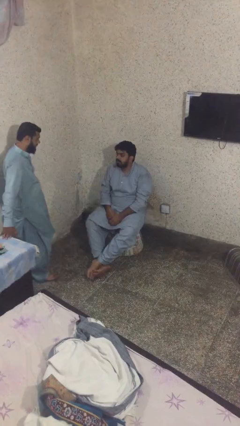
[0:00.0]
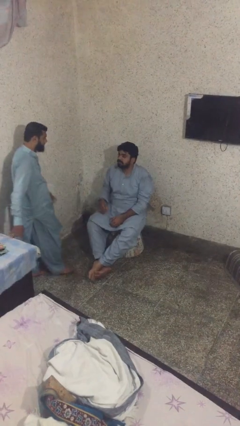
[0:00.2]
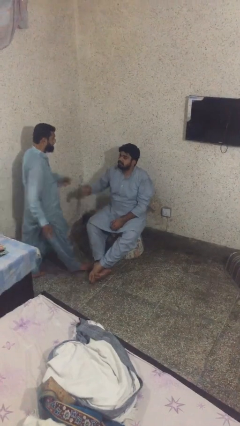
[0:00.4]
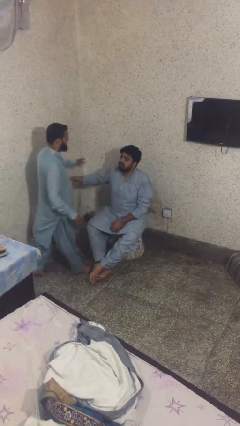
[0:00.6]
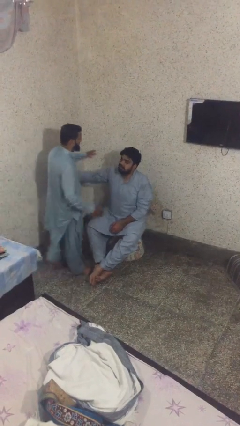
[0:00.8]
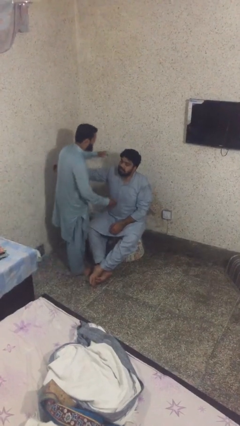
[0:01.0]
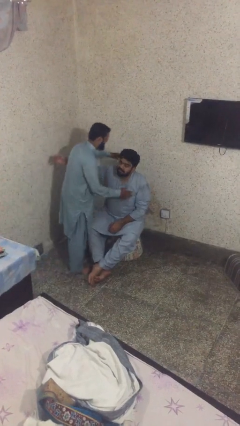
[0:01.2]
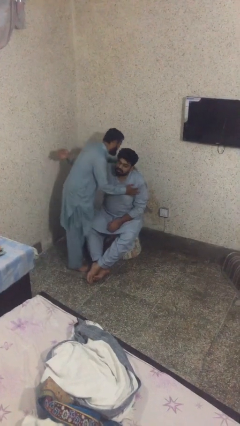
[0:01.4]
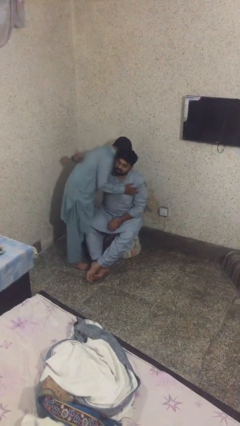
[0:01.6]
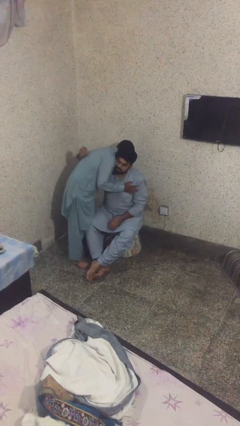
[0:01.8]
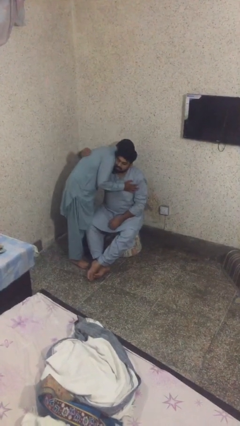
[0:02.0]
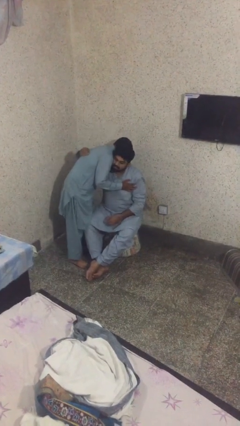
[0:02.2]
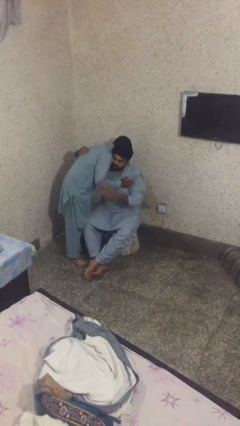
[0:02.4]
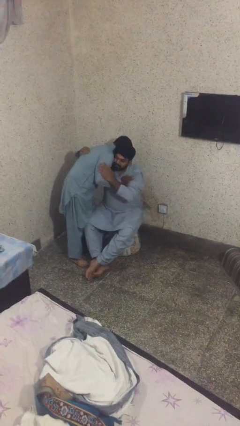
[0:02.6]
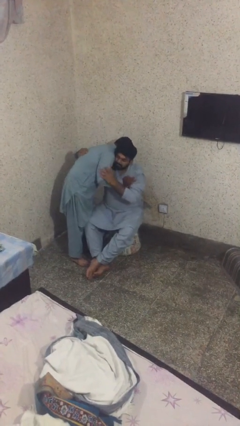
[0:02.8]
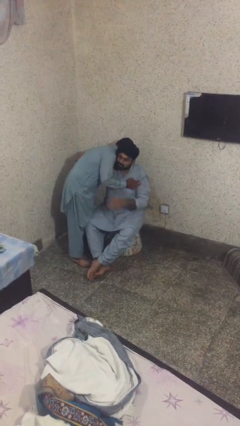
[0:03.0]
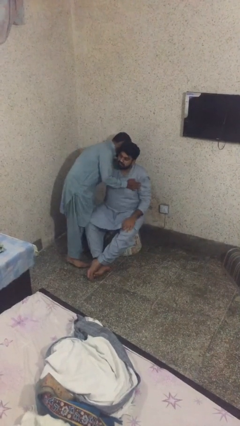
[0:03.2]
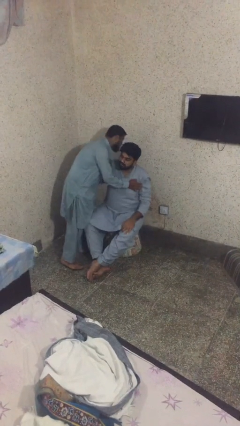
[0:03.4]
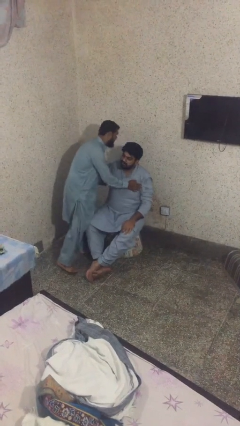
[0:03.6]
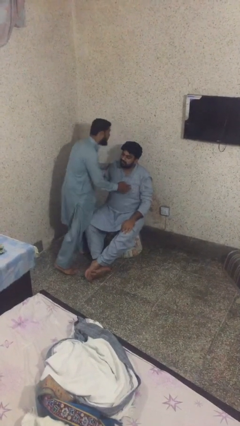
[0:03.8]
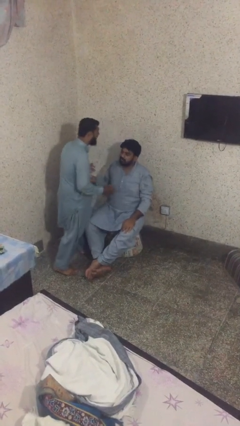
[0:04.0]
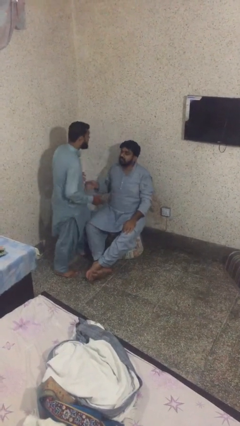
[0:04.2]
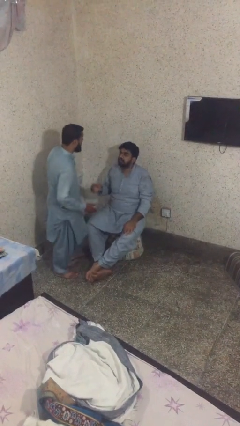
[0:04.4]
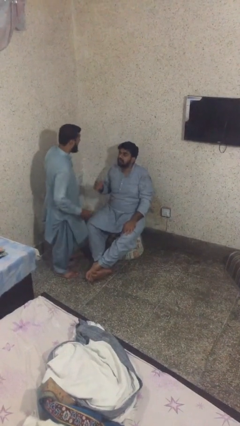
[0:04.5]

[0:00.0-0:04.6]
person embraces person

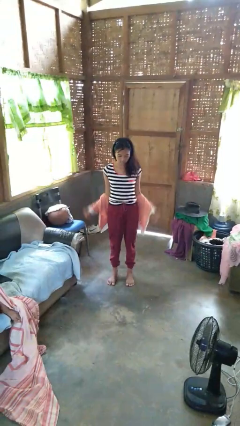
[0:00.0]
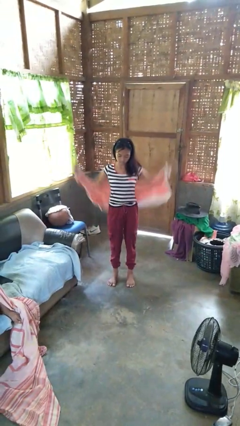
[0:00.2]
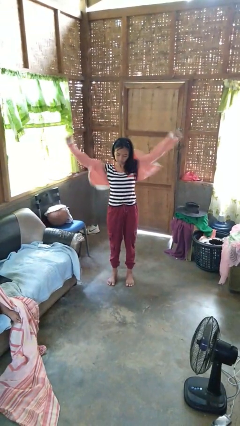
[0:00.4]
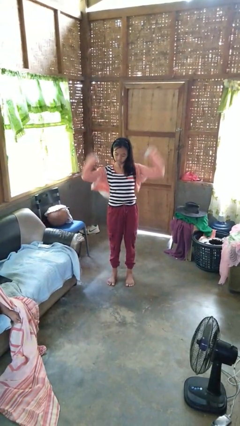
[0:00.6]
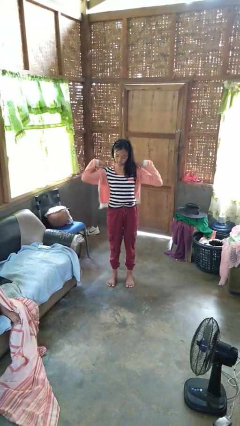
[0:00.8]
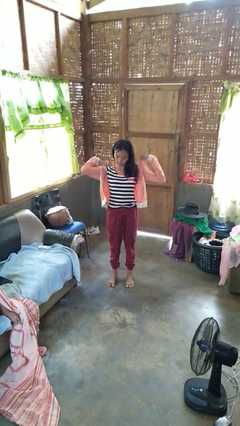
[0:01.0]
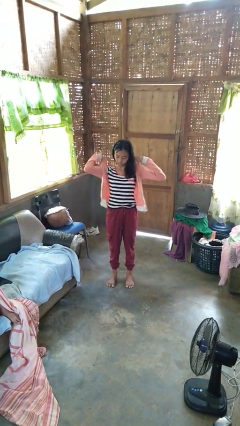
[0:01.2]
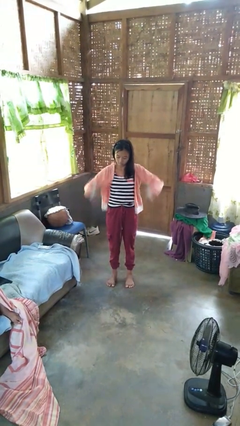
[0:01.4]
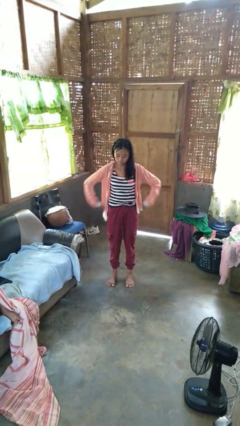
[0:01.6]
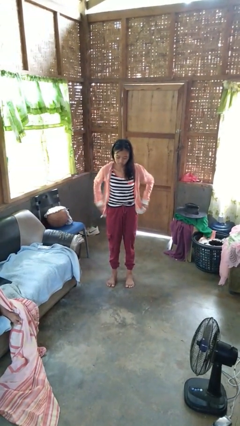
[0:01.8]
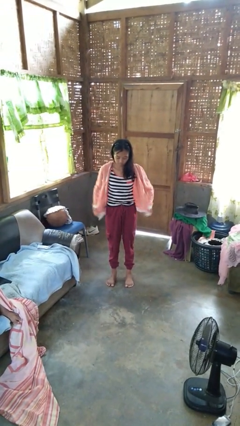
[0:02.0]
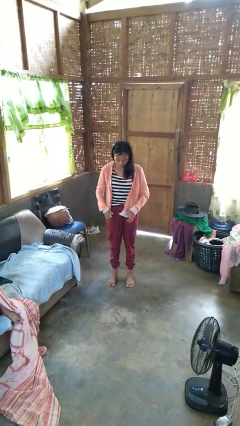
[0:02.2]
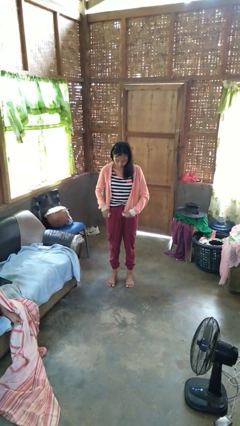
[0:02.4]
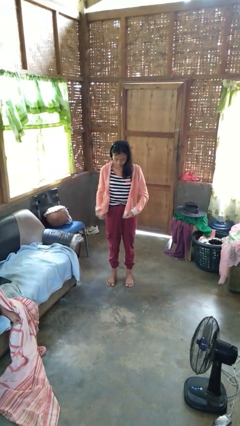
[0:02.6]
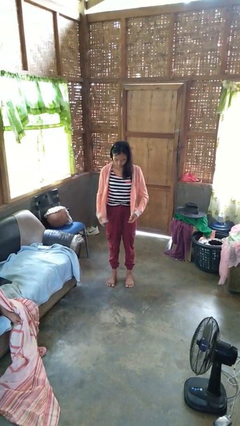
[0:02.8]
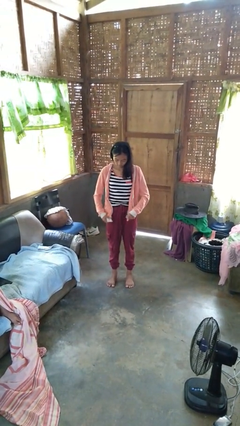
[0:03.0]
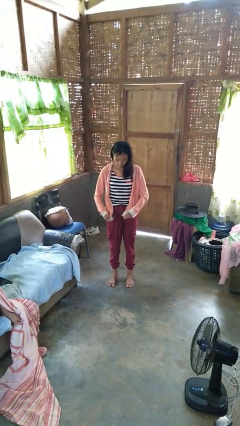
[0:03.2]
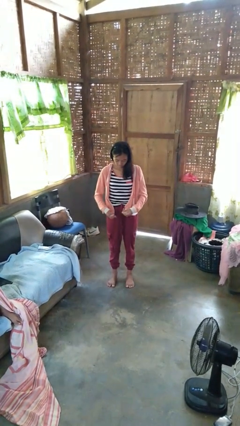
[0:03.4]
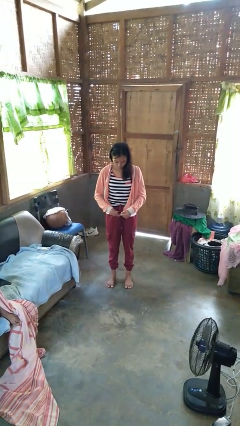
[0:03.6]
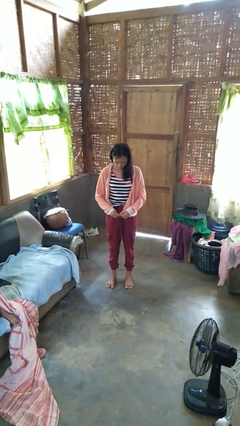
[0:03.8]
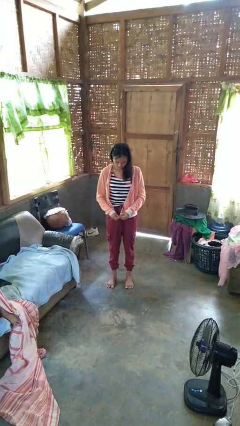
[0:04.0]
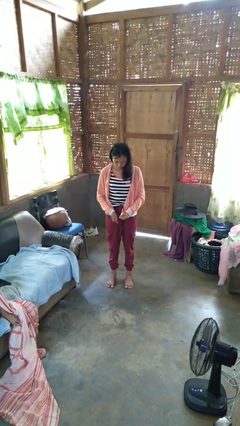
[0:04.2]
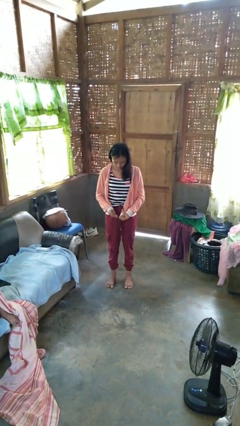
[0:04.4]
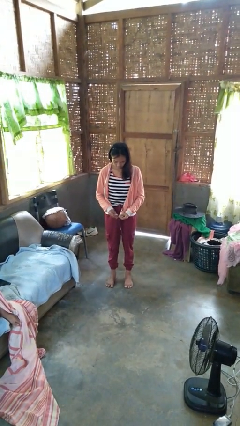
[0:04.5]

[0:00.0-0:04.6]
person puts on jacket

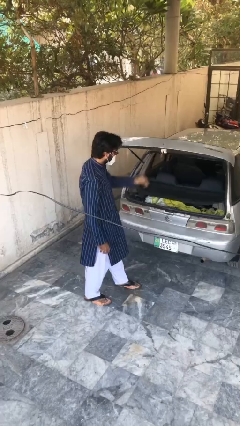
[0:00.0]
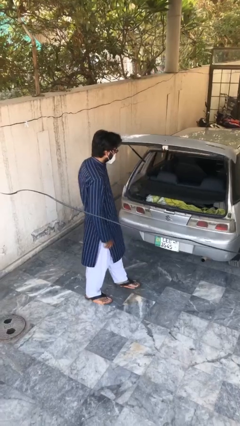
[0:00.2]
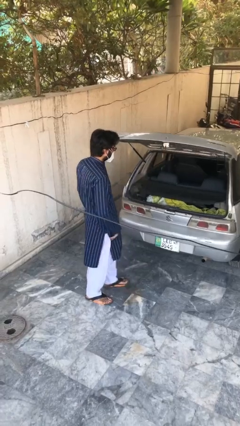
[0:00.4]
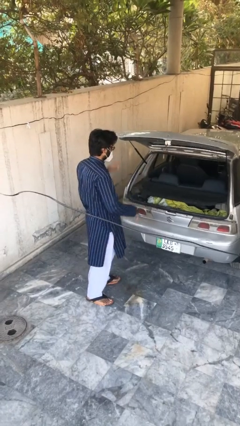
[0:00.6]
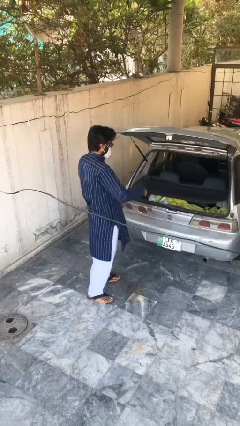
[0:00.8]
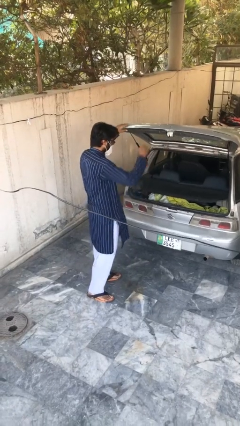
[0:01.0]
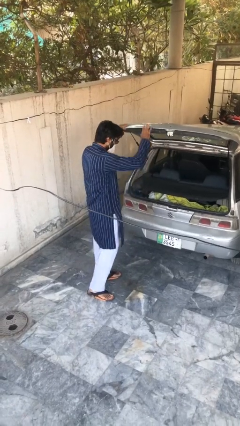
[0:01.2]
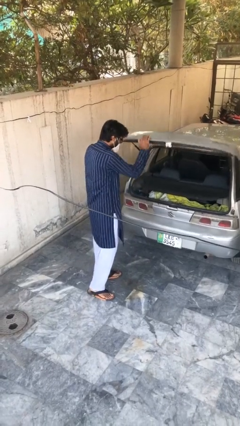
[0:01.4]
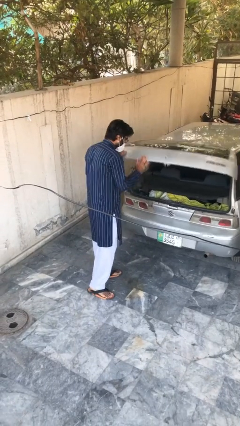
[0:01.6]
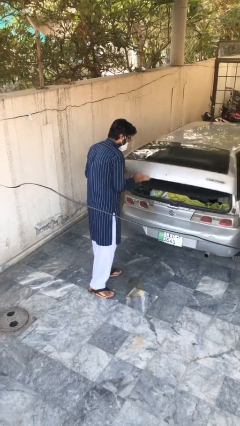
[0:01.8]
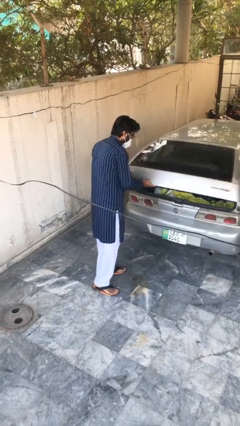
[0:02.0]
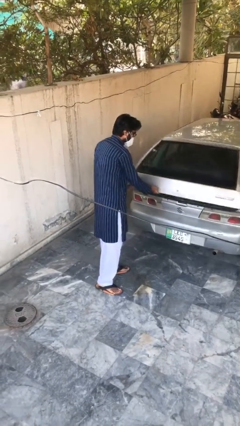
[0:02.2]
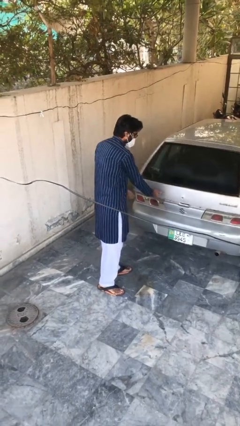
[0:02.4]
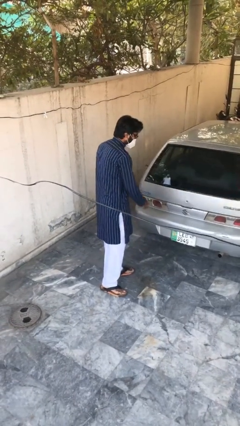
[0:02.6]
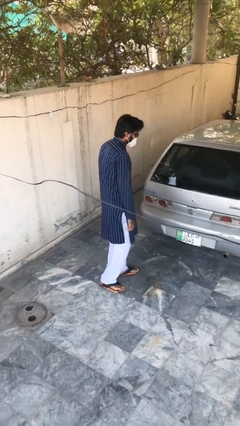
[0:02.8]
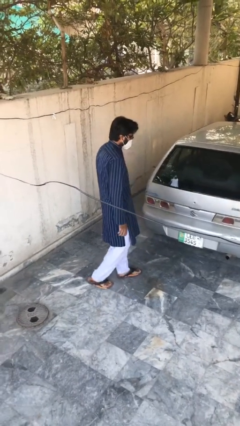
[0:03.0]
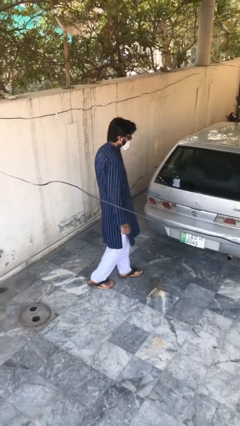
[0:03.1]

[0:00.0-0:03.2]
person closes car trunk

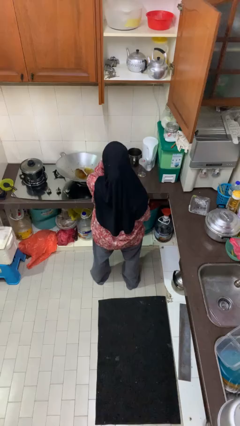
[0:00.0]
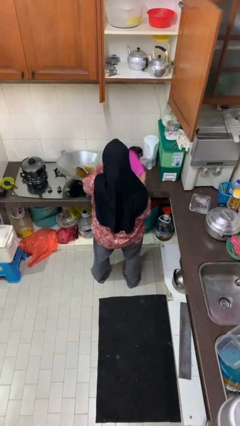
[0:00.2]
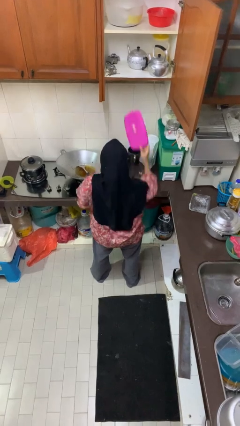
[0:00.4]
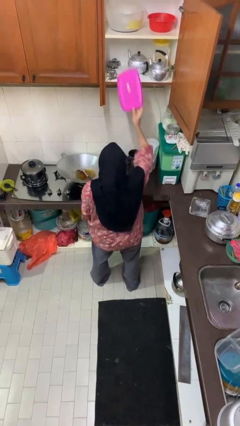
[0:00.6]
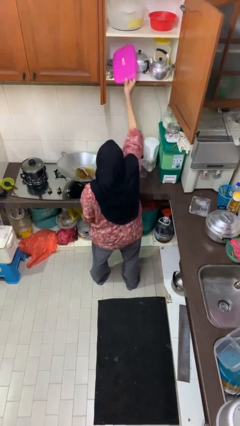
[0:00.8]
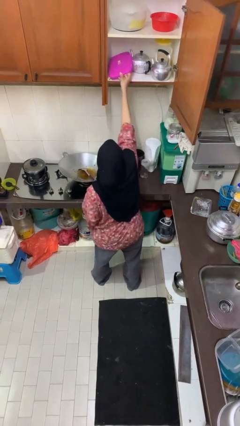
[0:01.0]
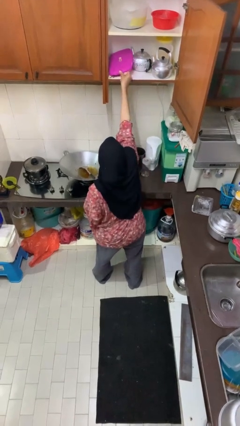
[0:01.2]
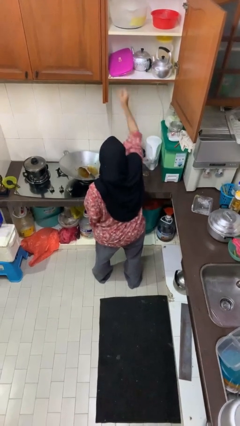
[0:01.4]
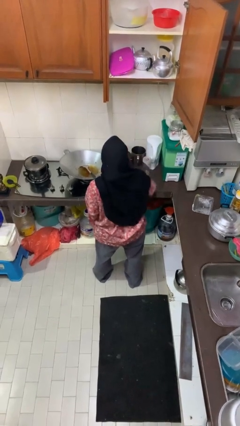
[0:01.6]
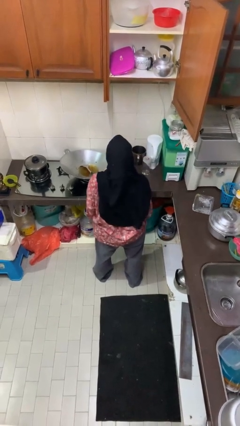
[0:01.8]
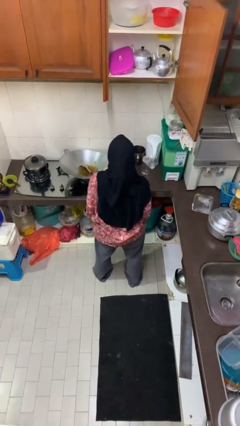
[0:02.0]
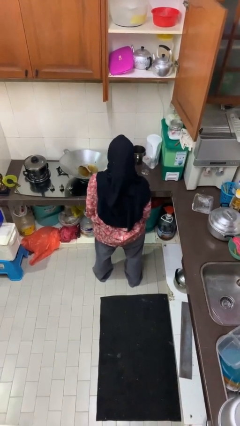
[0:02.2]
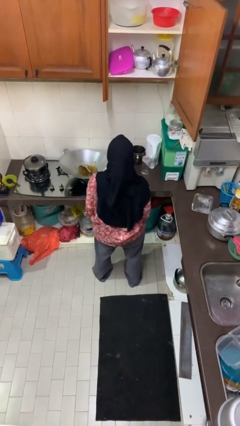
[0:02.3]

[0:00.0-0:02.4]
person puts object in cabinet

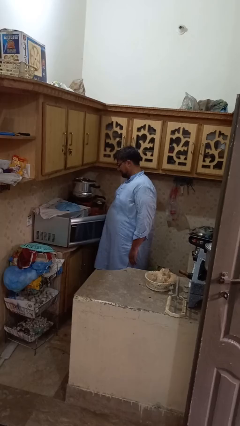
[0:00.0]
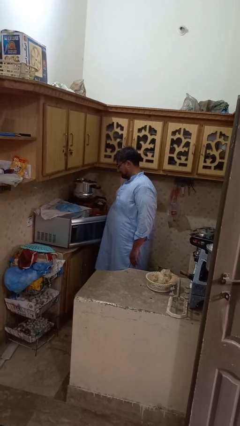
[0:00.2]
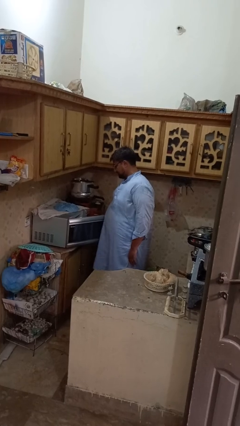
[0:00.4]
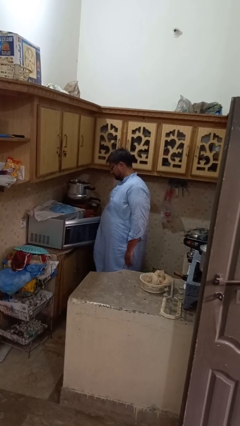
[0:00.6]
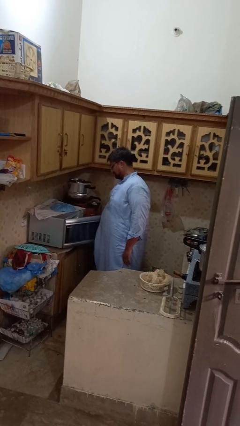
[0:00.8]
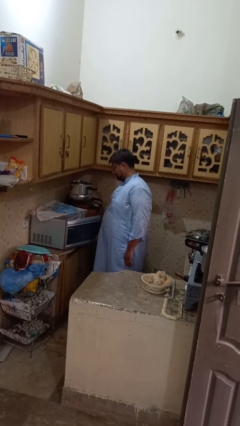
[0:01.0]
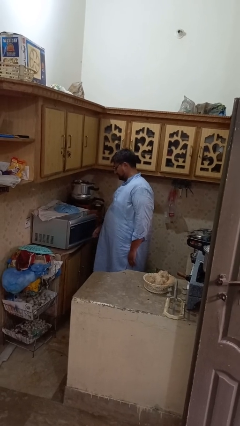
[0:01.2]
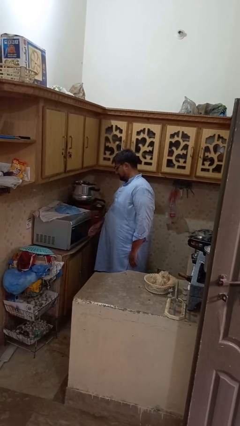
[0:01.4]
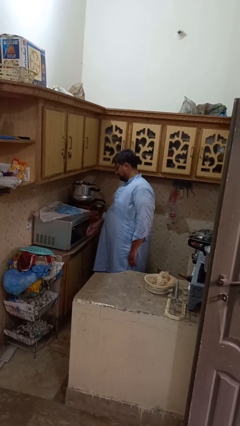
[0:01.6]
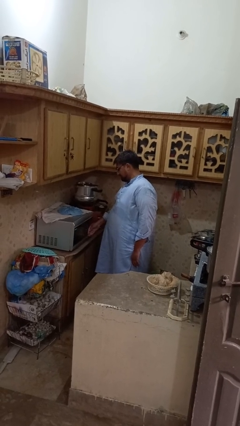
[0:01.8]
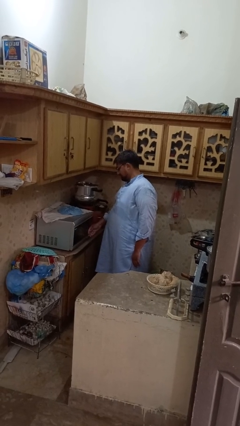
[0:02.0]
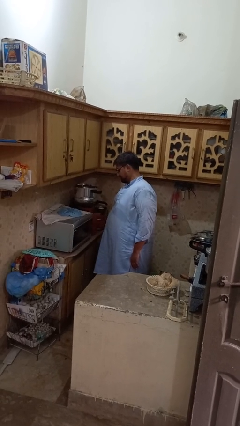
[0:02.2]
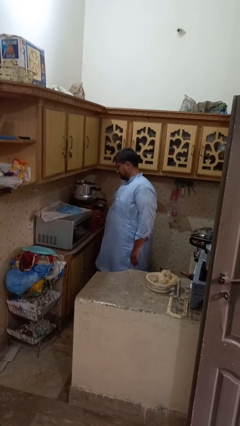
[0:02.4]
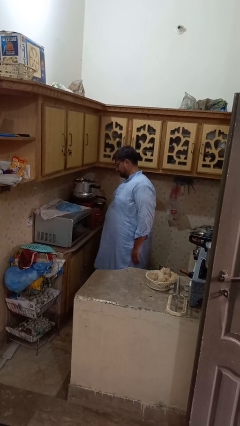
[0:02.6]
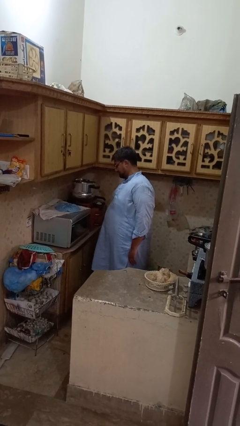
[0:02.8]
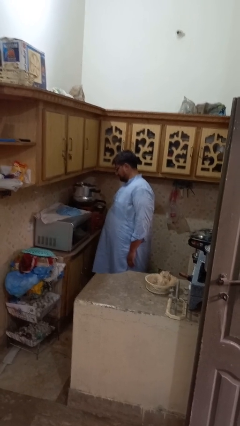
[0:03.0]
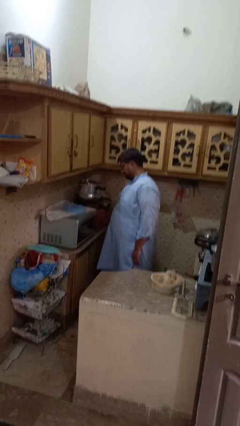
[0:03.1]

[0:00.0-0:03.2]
person closes microwave
